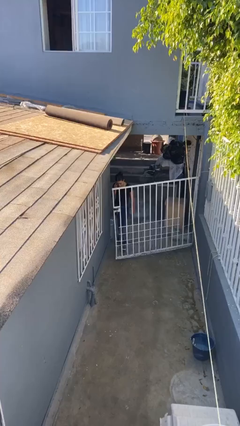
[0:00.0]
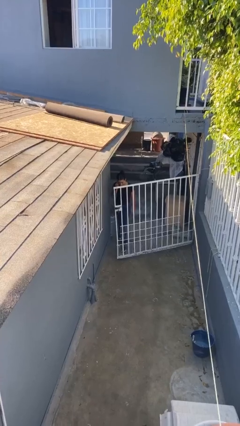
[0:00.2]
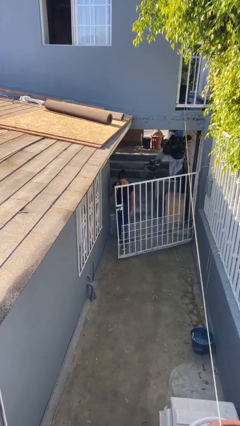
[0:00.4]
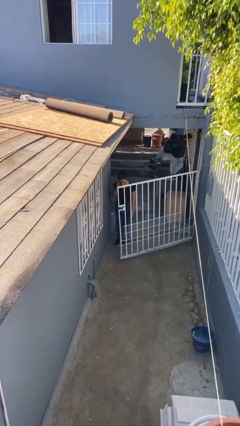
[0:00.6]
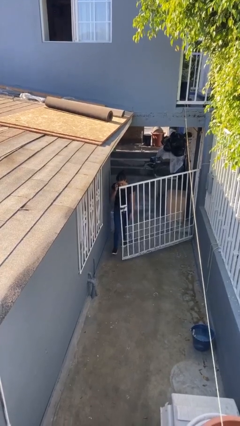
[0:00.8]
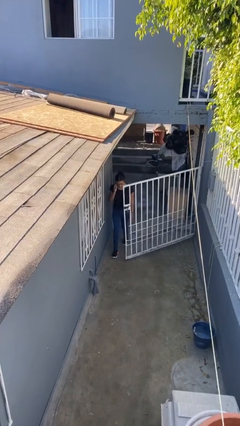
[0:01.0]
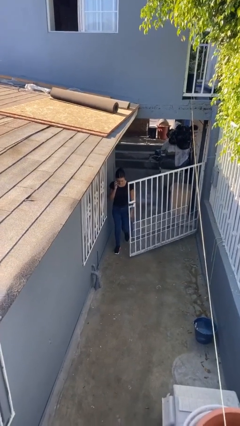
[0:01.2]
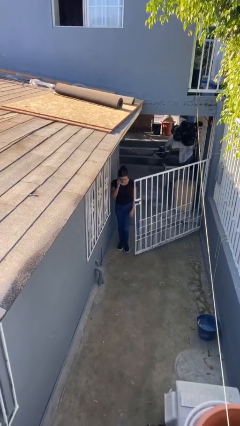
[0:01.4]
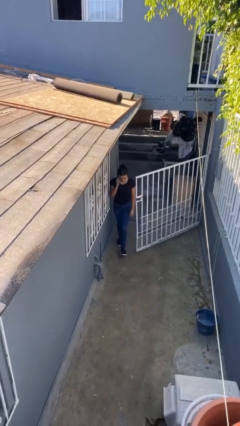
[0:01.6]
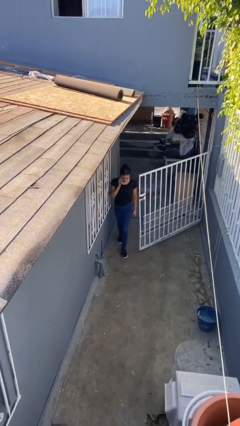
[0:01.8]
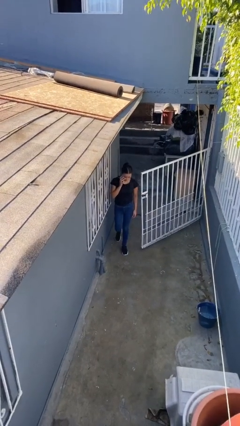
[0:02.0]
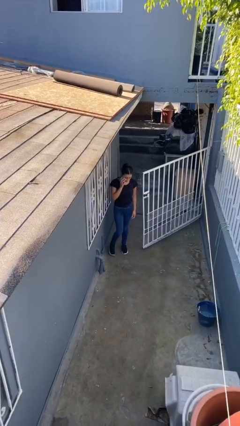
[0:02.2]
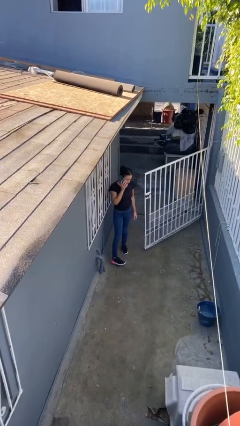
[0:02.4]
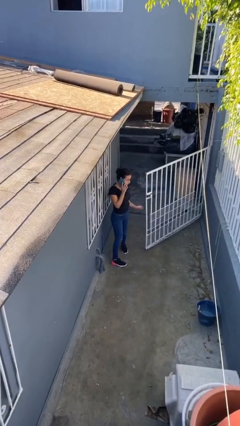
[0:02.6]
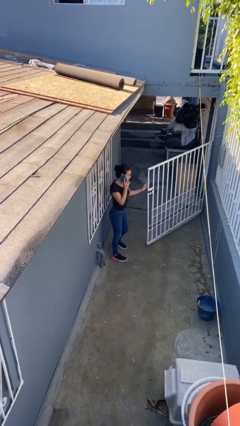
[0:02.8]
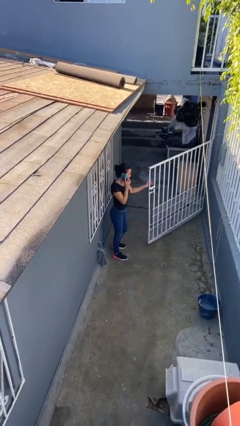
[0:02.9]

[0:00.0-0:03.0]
person enters scene through structure

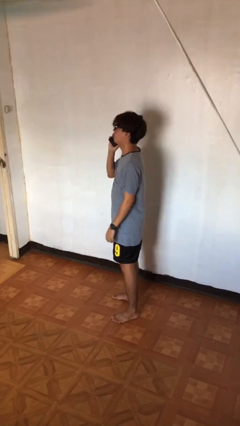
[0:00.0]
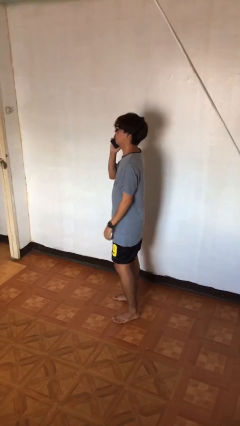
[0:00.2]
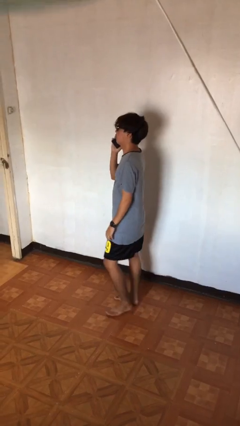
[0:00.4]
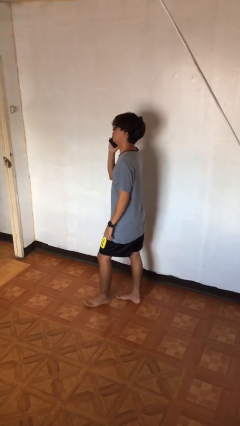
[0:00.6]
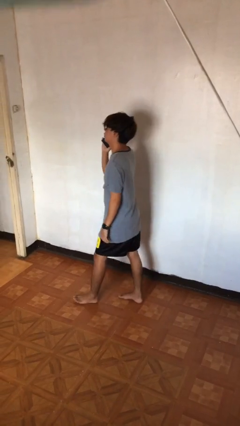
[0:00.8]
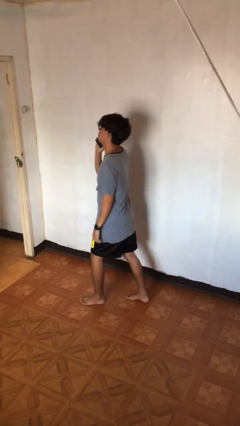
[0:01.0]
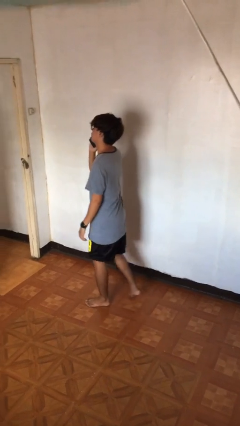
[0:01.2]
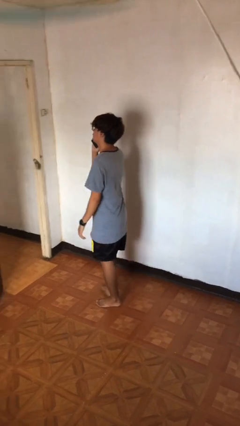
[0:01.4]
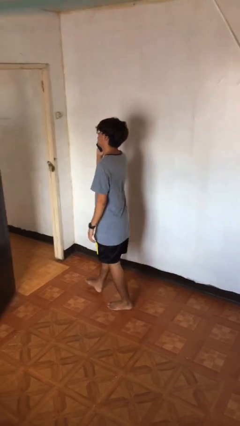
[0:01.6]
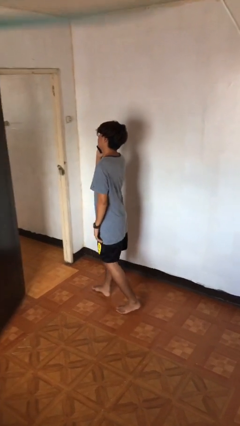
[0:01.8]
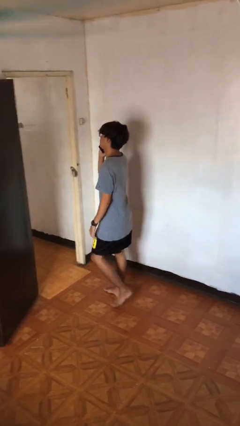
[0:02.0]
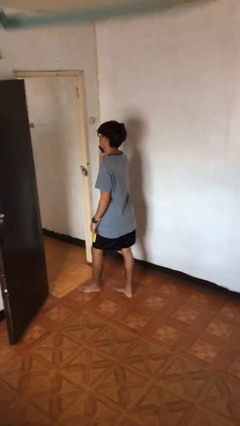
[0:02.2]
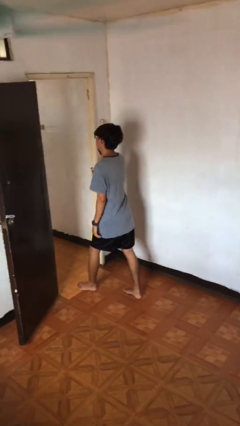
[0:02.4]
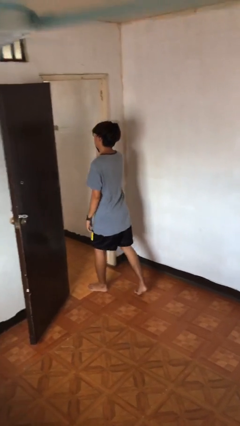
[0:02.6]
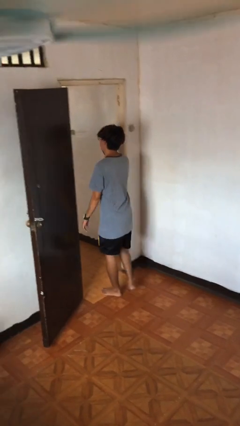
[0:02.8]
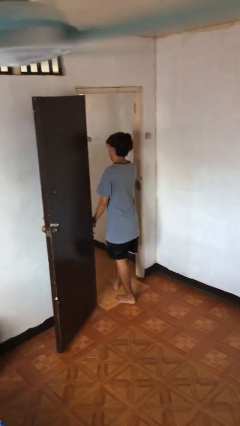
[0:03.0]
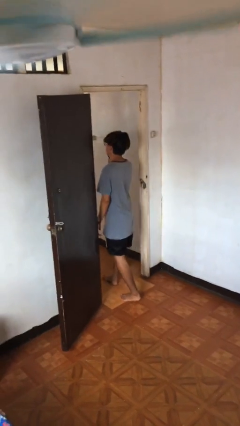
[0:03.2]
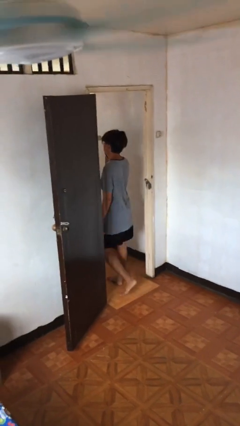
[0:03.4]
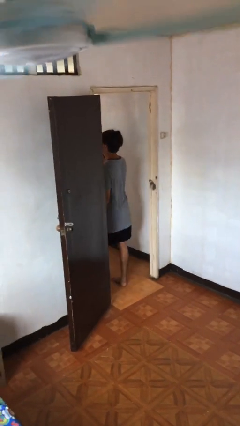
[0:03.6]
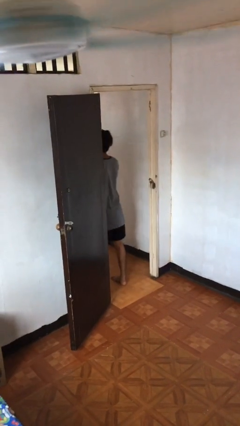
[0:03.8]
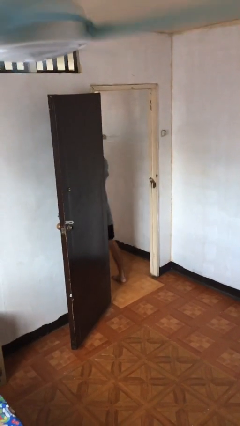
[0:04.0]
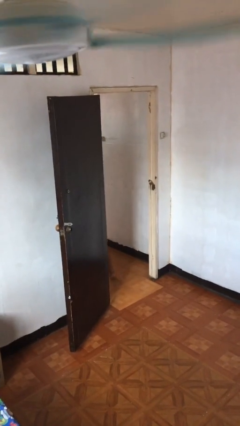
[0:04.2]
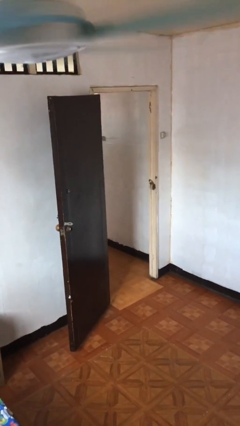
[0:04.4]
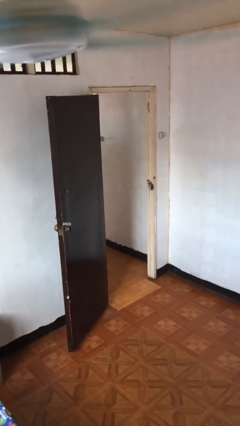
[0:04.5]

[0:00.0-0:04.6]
person exits scene through structure

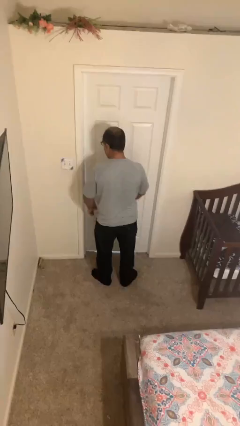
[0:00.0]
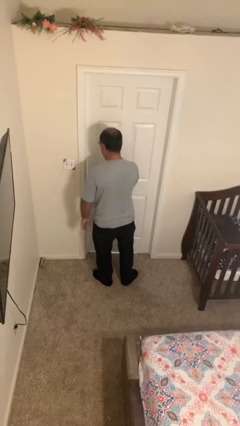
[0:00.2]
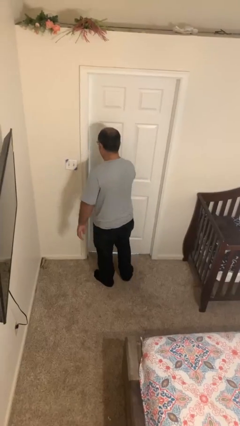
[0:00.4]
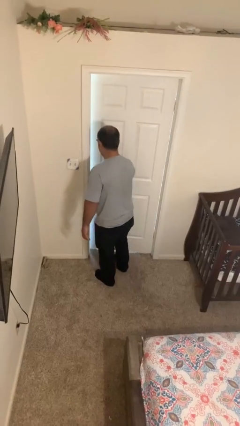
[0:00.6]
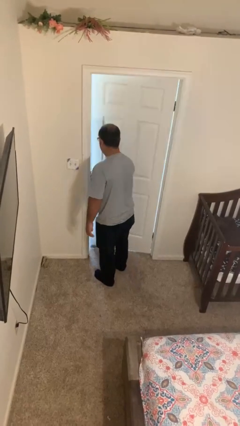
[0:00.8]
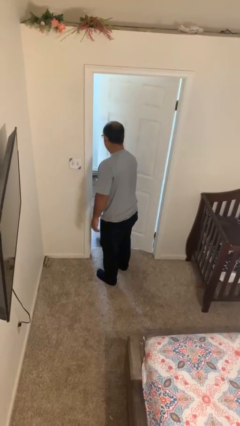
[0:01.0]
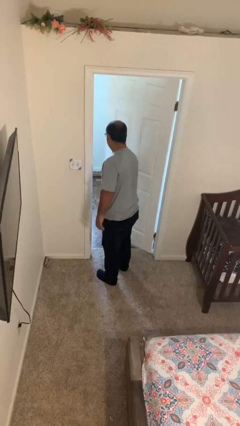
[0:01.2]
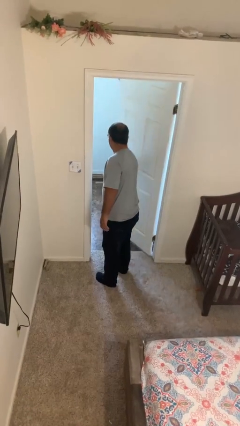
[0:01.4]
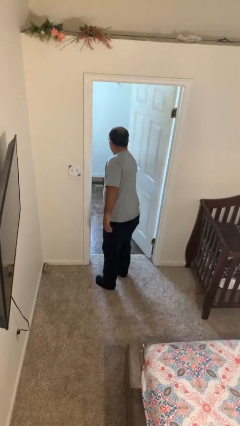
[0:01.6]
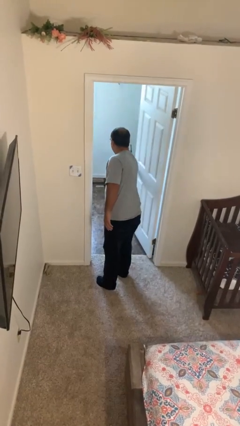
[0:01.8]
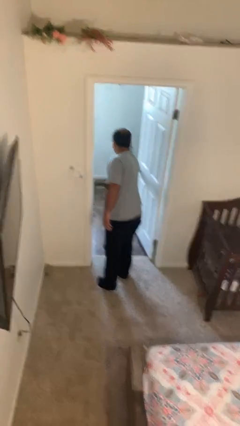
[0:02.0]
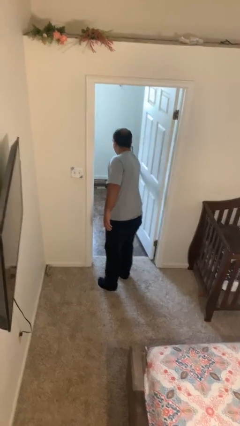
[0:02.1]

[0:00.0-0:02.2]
person opens facility door

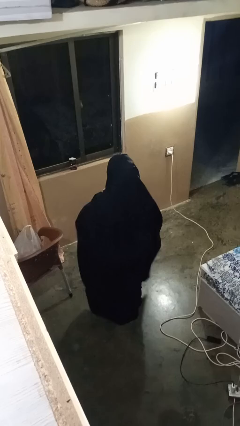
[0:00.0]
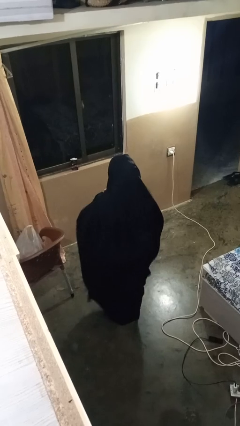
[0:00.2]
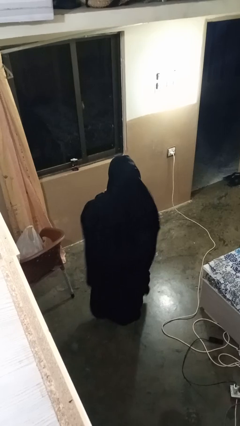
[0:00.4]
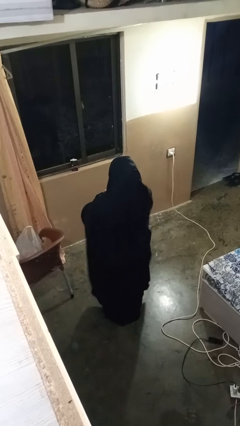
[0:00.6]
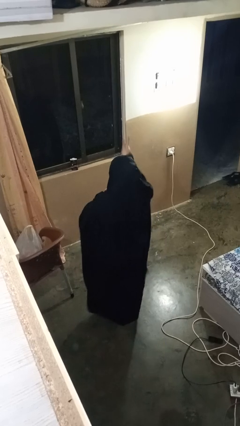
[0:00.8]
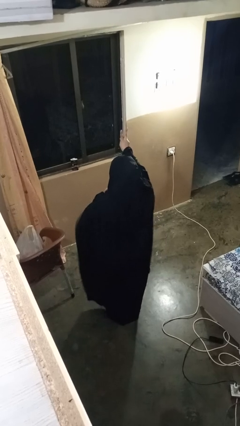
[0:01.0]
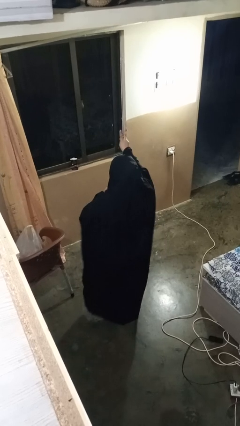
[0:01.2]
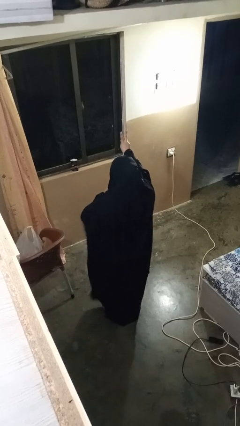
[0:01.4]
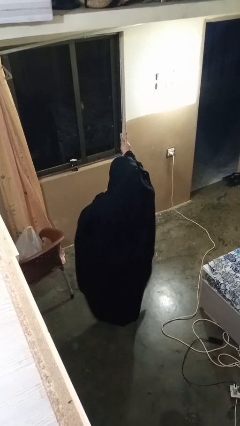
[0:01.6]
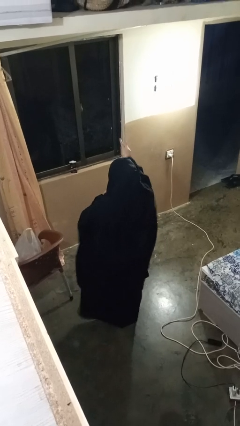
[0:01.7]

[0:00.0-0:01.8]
person gestures peace

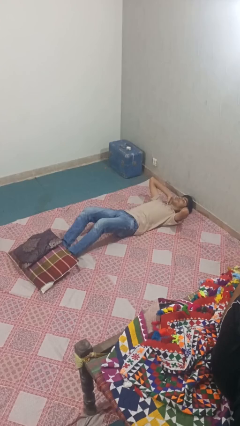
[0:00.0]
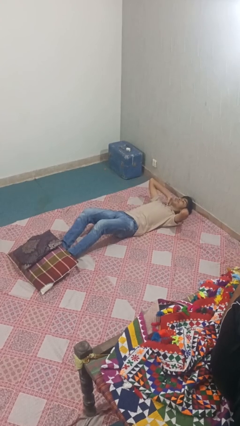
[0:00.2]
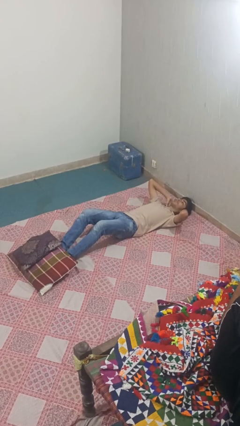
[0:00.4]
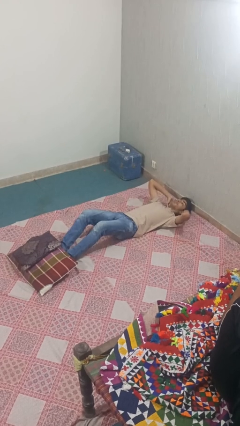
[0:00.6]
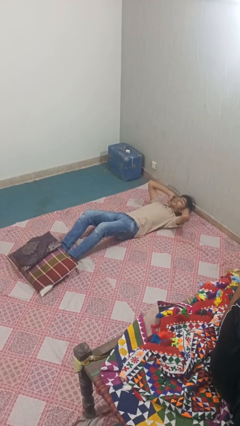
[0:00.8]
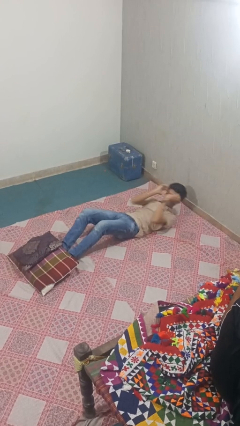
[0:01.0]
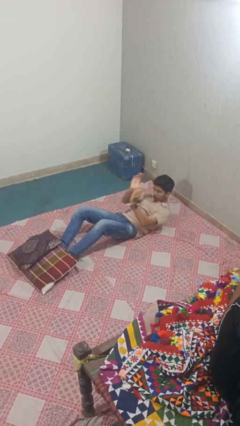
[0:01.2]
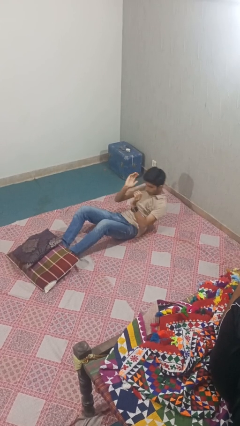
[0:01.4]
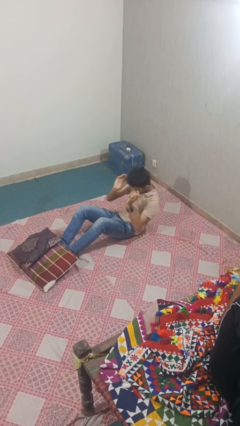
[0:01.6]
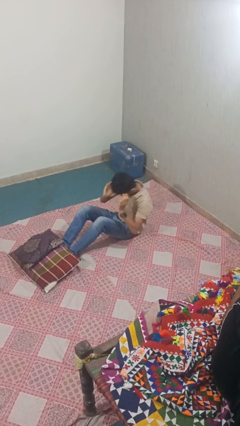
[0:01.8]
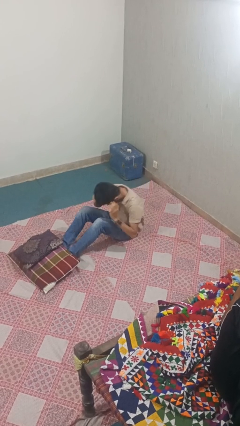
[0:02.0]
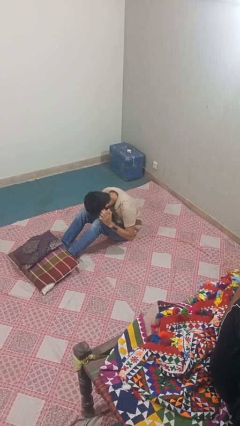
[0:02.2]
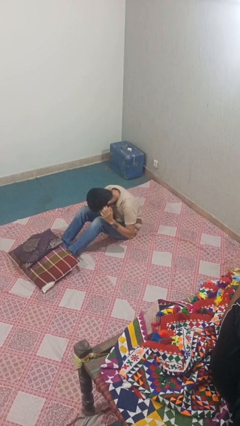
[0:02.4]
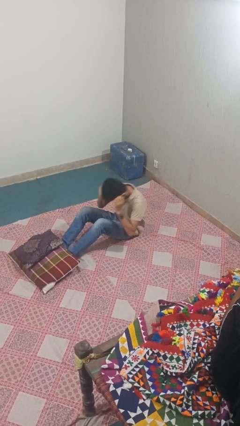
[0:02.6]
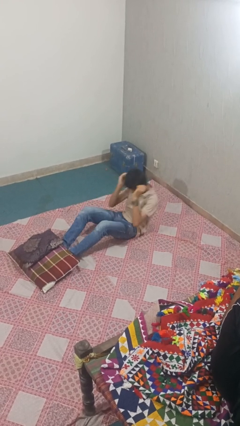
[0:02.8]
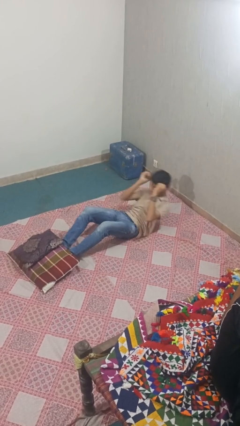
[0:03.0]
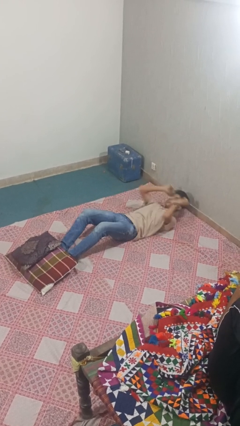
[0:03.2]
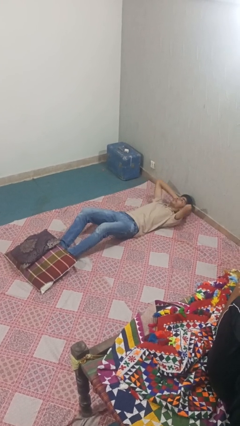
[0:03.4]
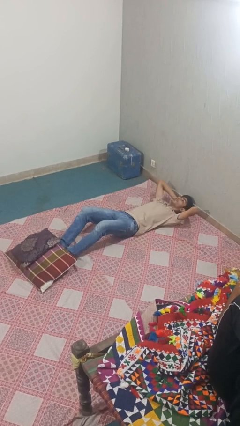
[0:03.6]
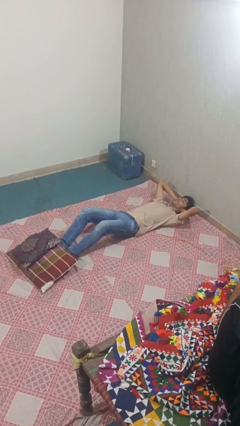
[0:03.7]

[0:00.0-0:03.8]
person exercises with situp

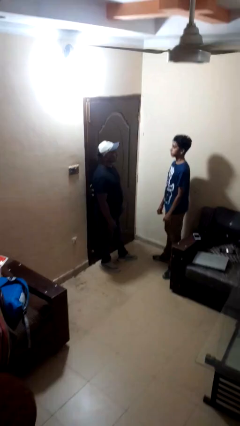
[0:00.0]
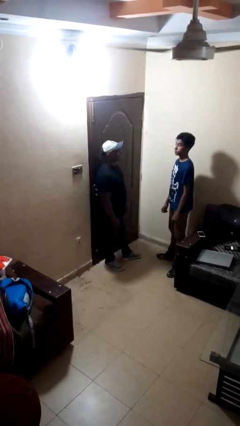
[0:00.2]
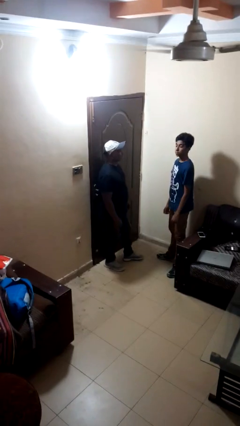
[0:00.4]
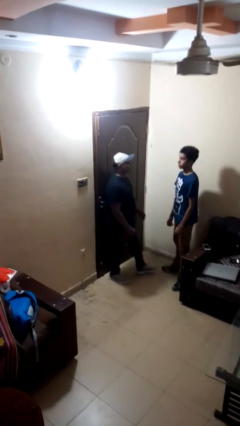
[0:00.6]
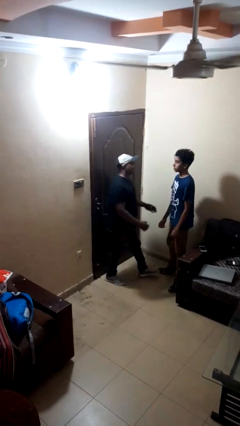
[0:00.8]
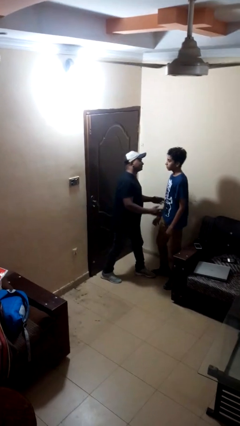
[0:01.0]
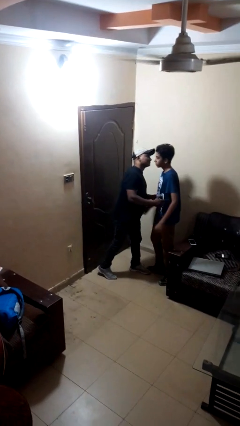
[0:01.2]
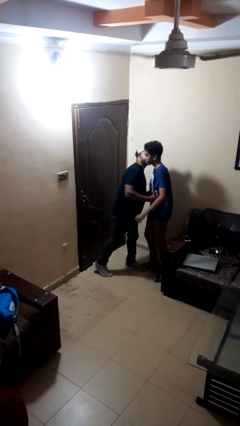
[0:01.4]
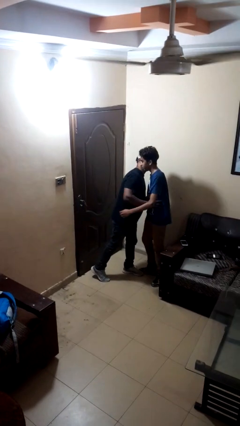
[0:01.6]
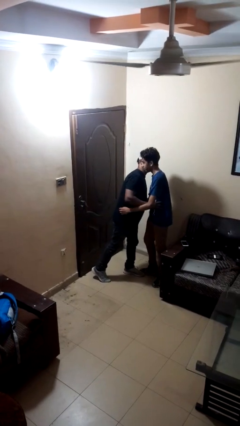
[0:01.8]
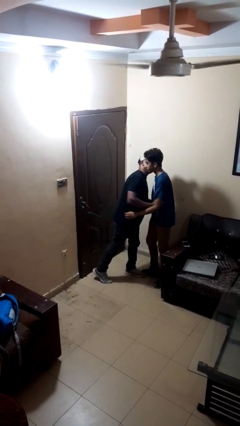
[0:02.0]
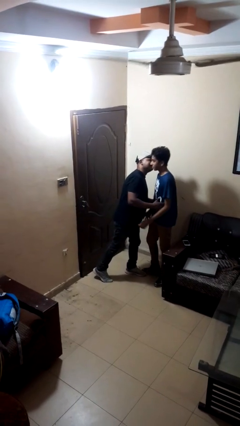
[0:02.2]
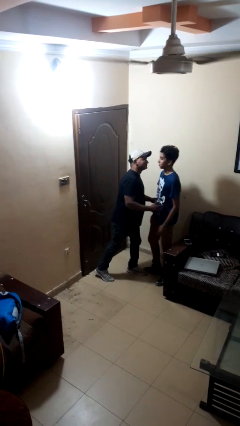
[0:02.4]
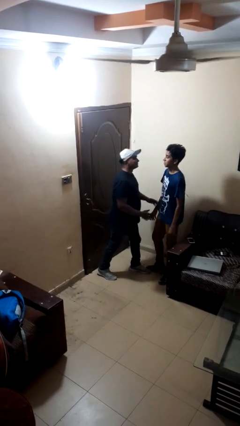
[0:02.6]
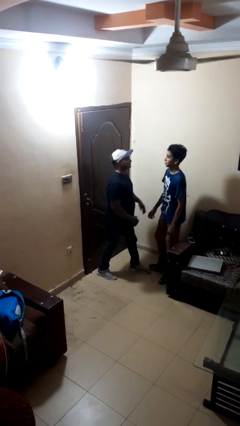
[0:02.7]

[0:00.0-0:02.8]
person kisses cheek of person
